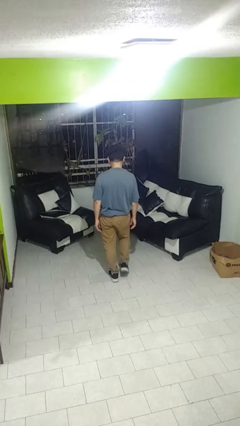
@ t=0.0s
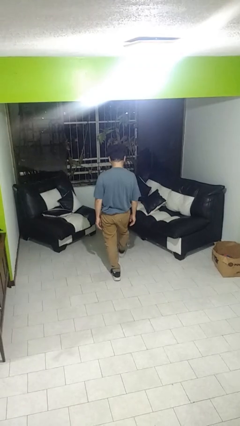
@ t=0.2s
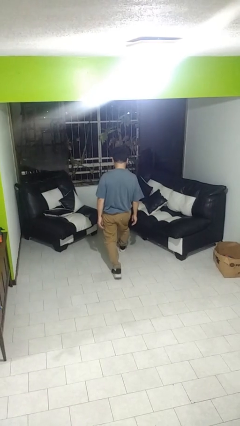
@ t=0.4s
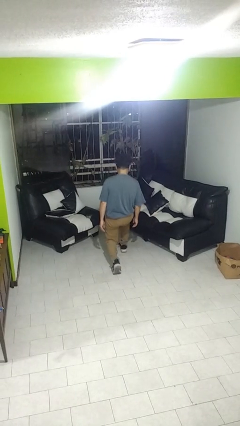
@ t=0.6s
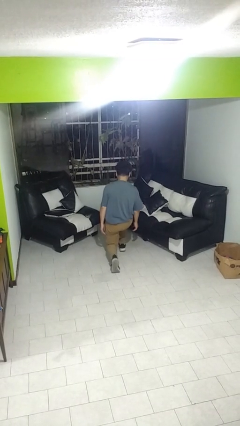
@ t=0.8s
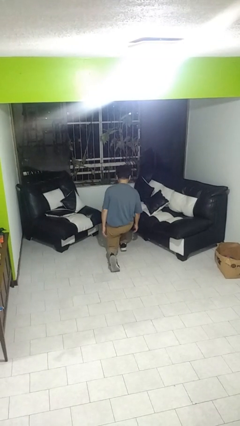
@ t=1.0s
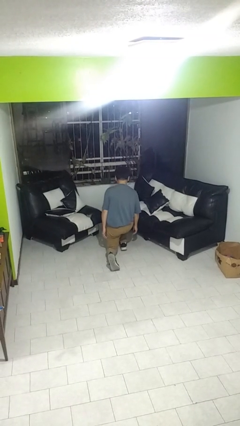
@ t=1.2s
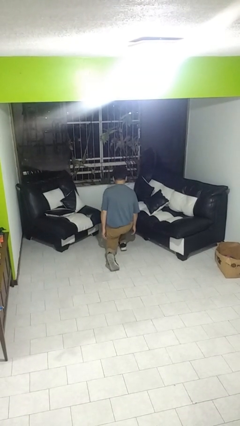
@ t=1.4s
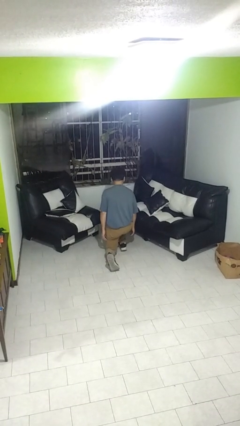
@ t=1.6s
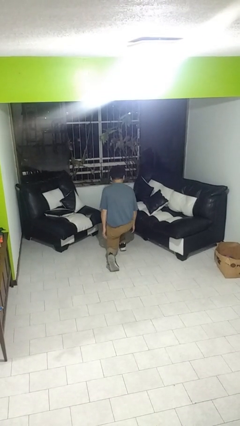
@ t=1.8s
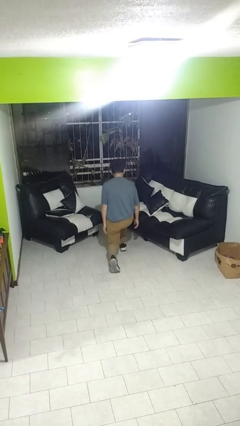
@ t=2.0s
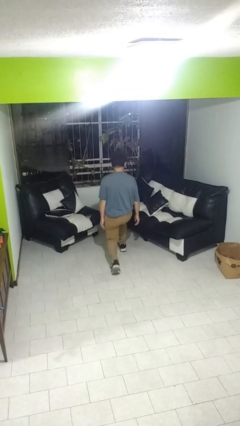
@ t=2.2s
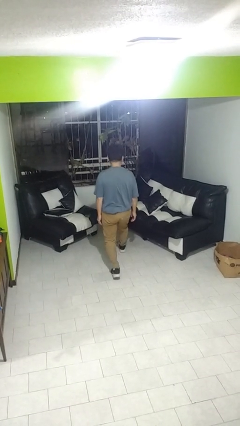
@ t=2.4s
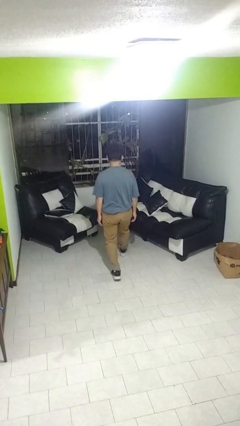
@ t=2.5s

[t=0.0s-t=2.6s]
person exercises with lunges

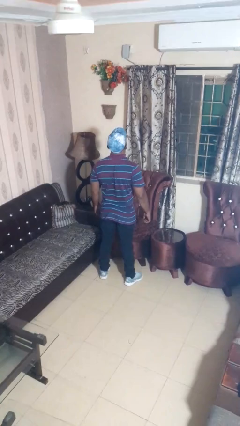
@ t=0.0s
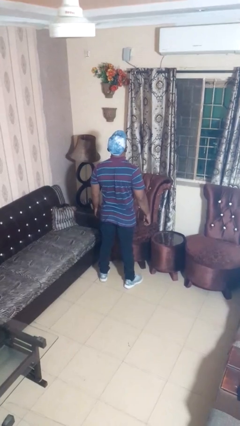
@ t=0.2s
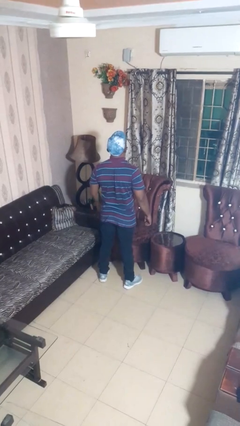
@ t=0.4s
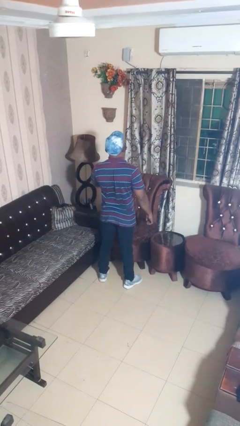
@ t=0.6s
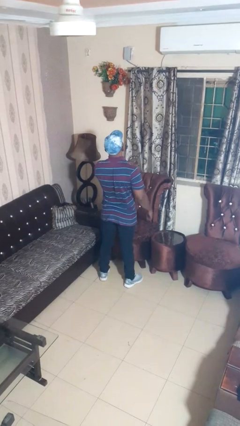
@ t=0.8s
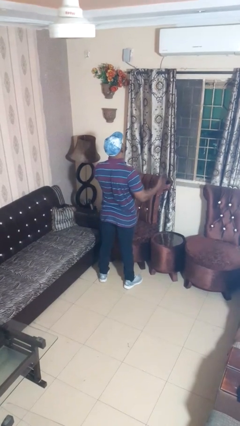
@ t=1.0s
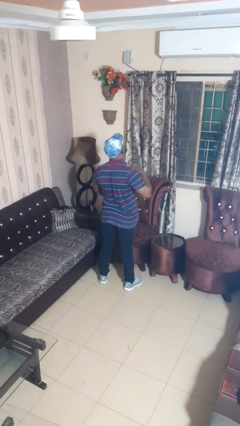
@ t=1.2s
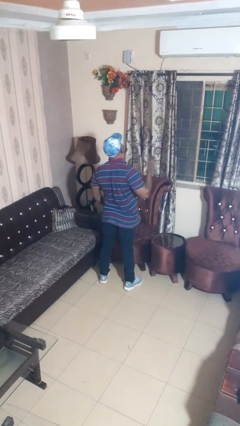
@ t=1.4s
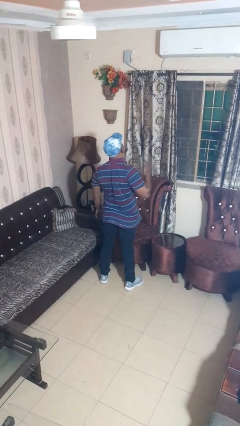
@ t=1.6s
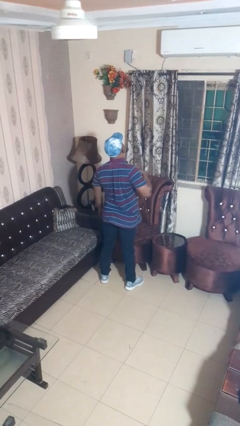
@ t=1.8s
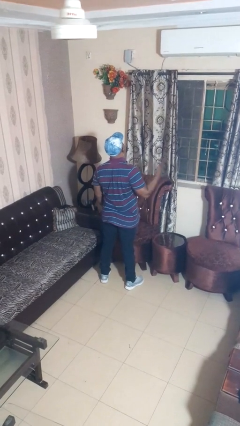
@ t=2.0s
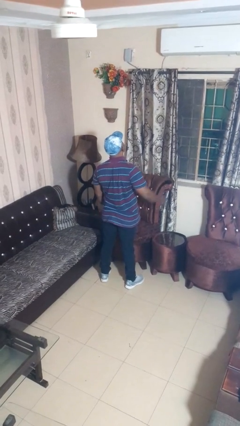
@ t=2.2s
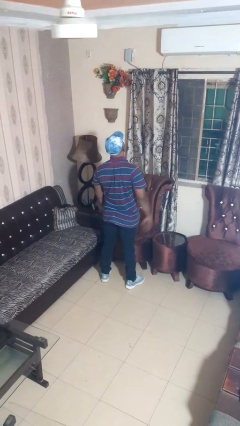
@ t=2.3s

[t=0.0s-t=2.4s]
person drums on chest

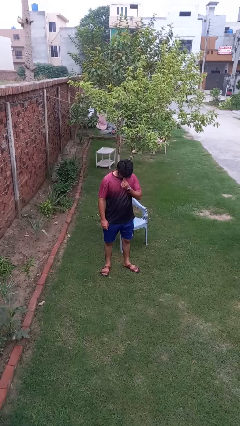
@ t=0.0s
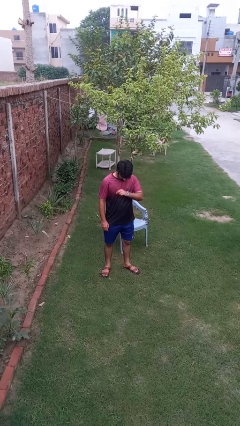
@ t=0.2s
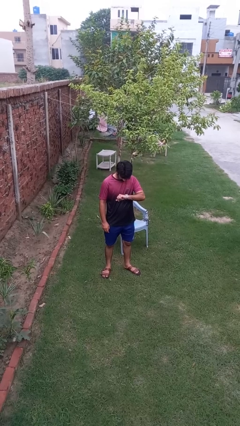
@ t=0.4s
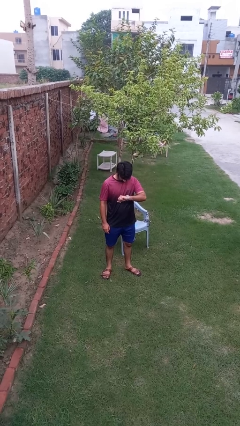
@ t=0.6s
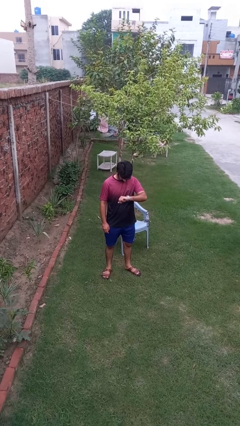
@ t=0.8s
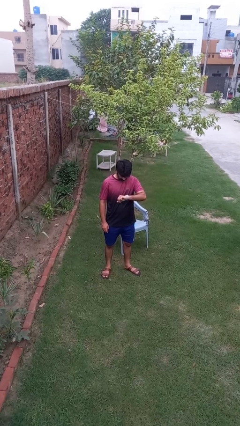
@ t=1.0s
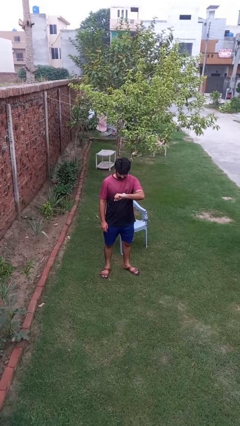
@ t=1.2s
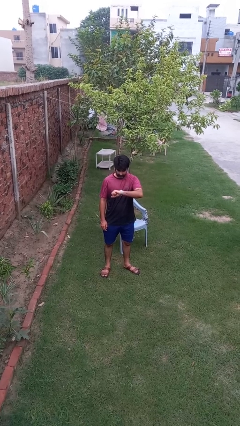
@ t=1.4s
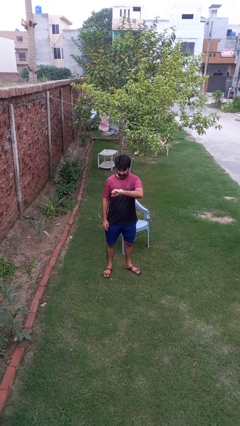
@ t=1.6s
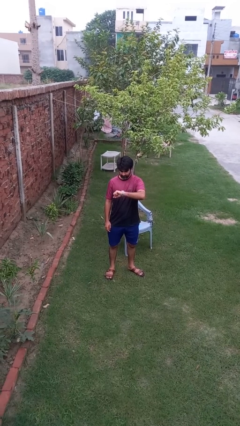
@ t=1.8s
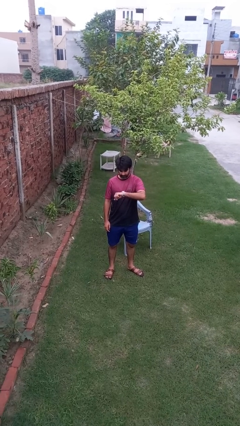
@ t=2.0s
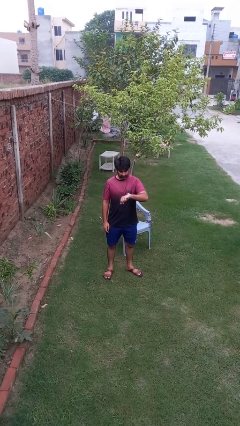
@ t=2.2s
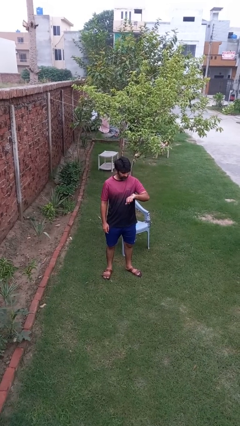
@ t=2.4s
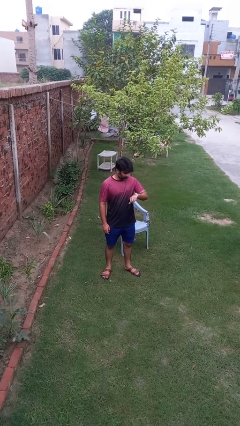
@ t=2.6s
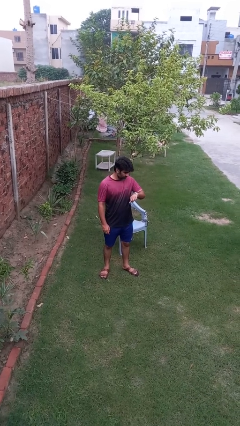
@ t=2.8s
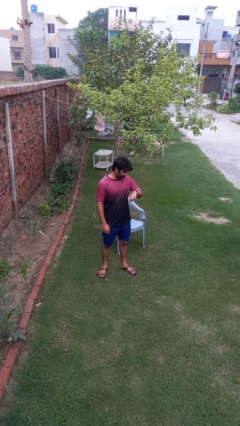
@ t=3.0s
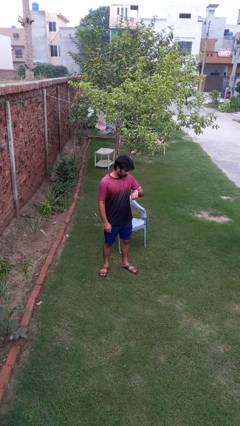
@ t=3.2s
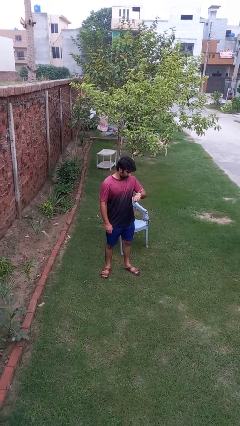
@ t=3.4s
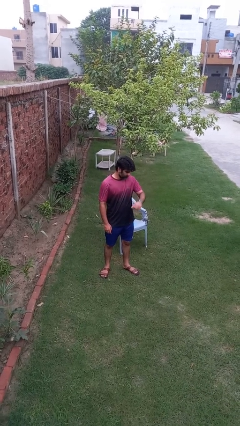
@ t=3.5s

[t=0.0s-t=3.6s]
person looks at wristwatch

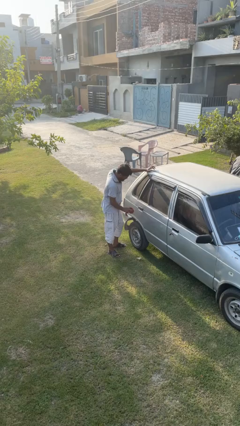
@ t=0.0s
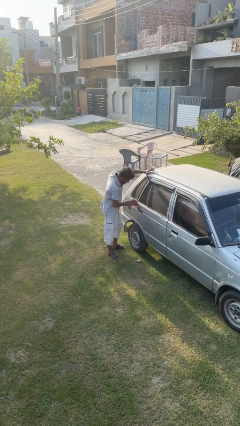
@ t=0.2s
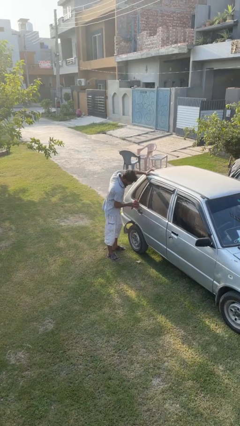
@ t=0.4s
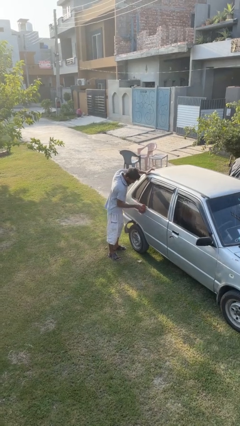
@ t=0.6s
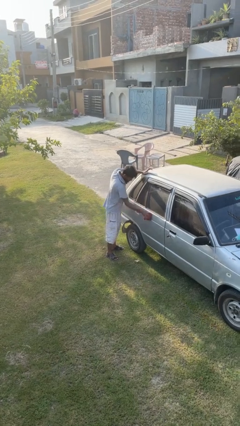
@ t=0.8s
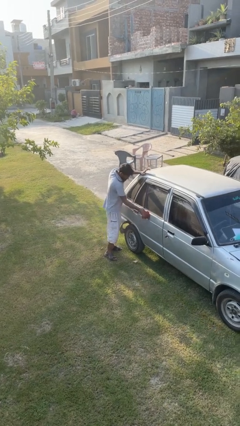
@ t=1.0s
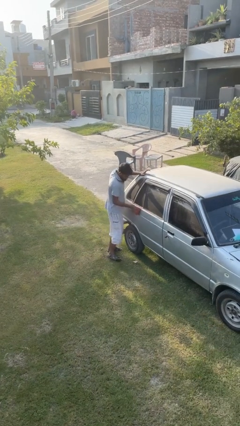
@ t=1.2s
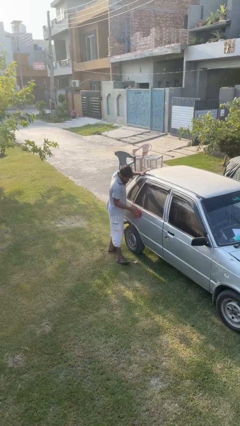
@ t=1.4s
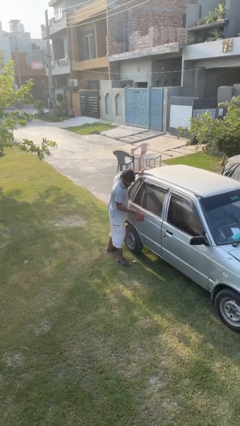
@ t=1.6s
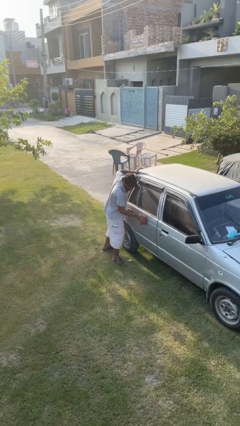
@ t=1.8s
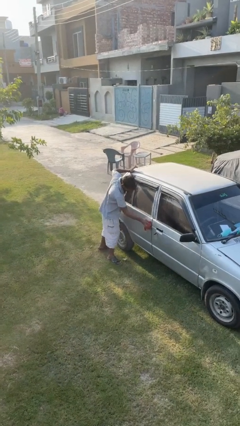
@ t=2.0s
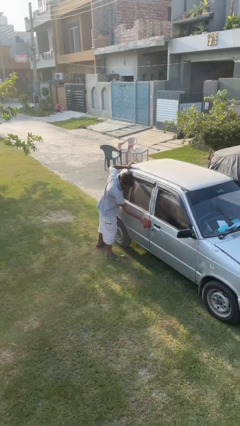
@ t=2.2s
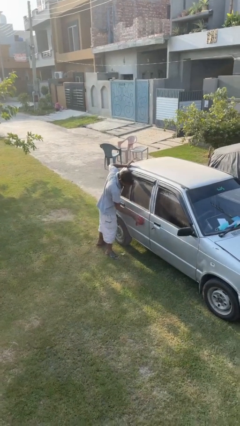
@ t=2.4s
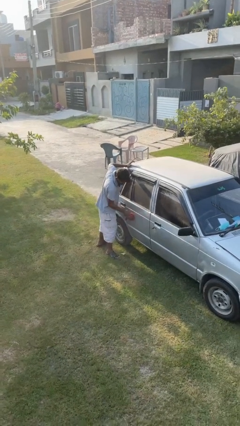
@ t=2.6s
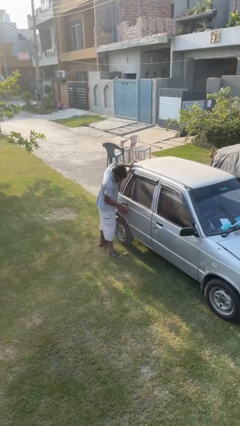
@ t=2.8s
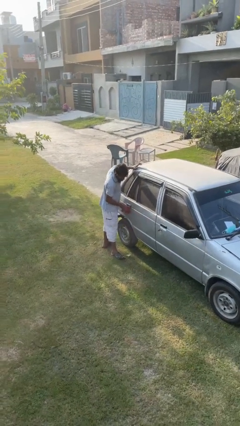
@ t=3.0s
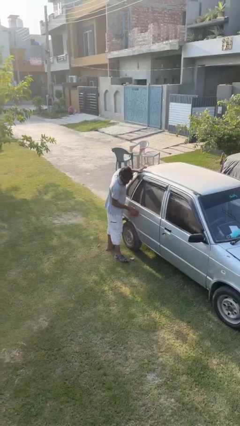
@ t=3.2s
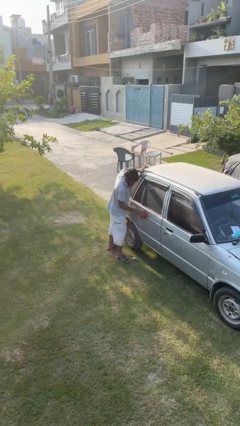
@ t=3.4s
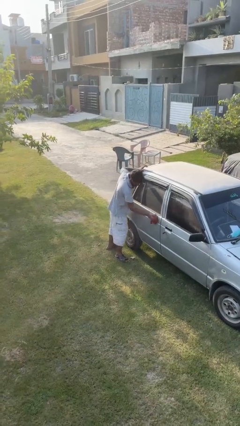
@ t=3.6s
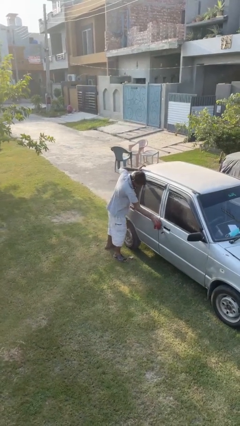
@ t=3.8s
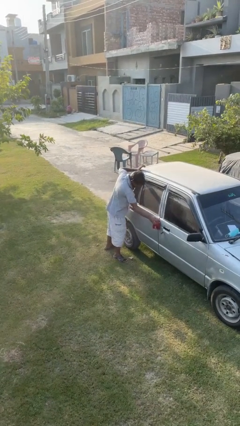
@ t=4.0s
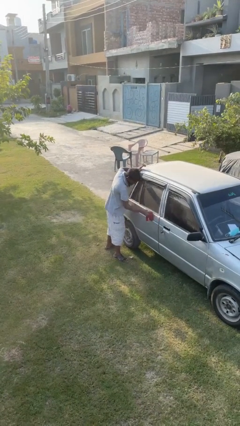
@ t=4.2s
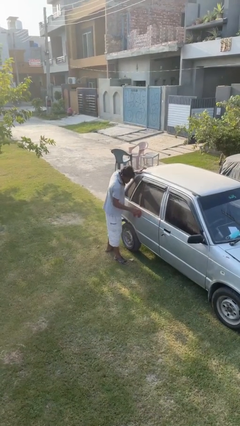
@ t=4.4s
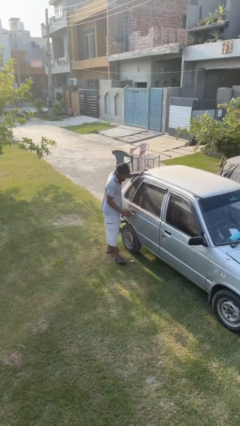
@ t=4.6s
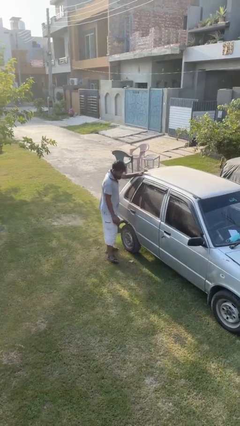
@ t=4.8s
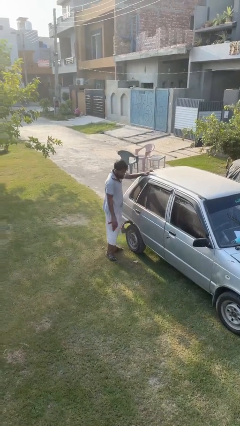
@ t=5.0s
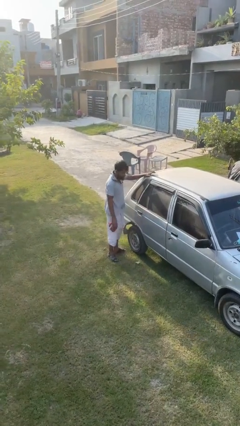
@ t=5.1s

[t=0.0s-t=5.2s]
person polishes car with rag

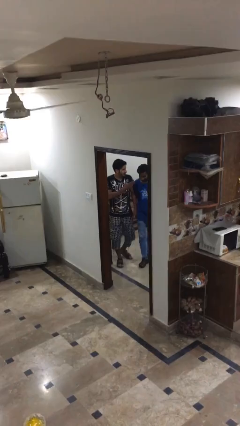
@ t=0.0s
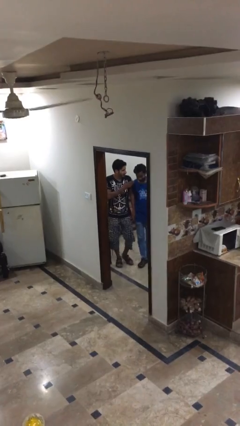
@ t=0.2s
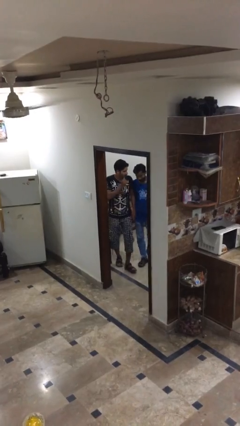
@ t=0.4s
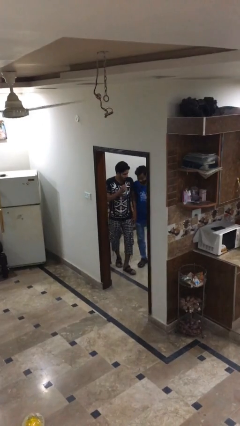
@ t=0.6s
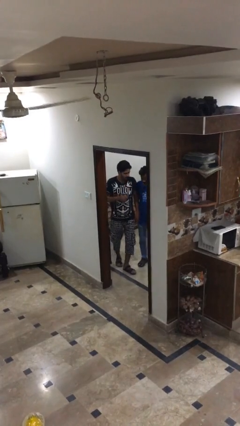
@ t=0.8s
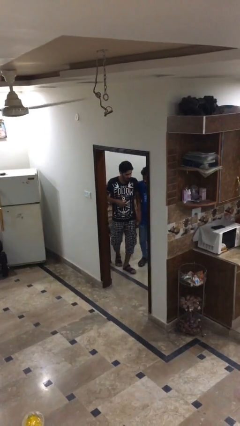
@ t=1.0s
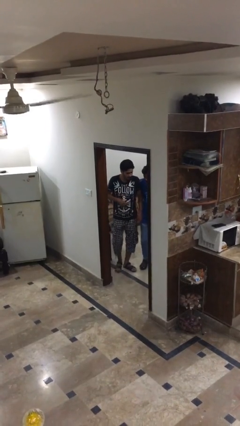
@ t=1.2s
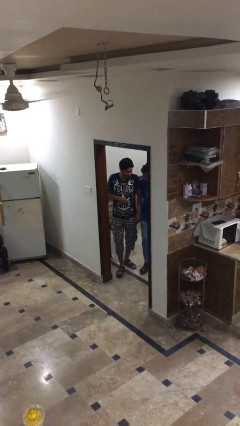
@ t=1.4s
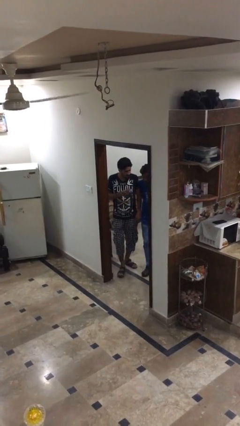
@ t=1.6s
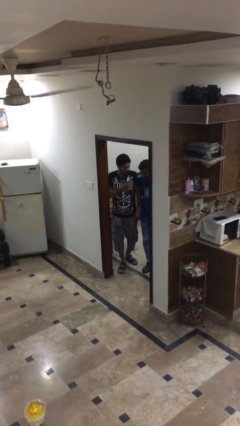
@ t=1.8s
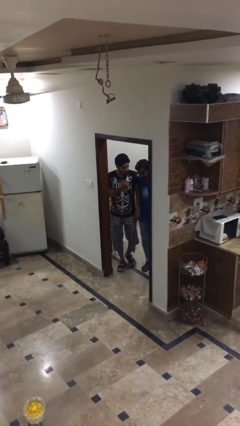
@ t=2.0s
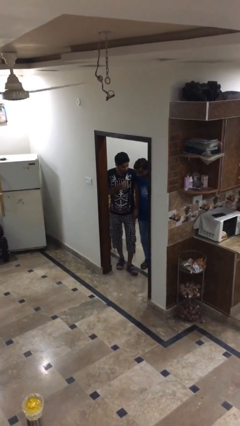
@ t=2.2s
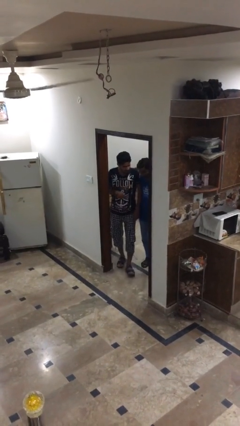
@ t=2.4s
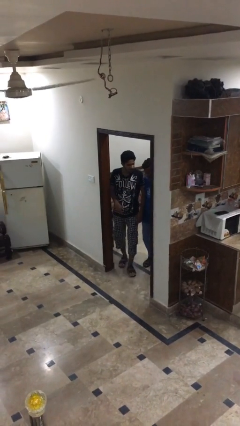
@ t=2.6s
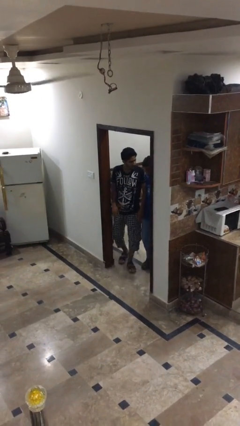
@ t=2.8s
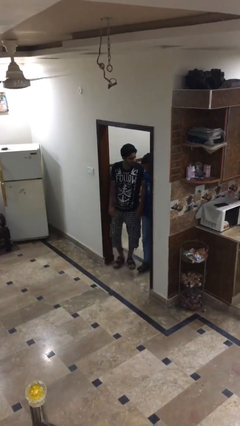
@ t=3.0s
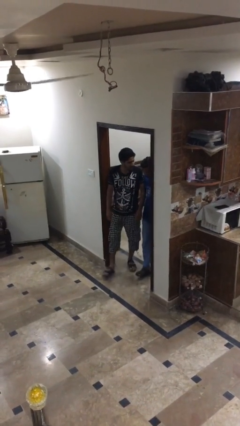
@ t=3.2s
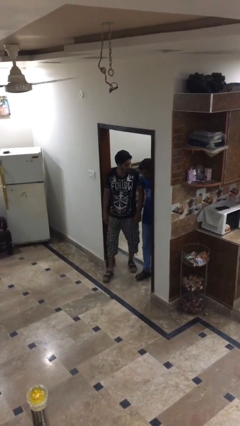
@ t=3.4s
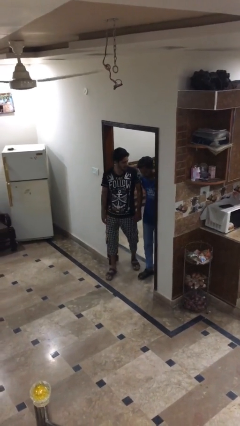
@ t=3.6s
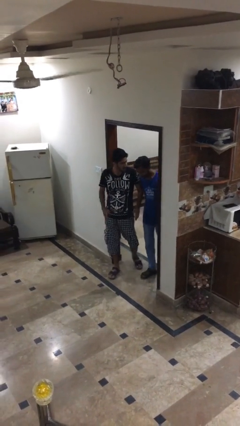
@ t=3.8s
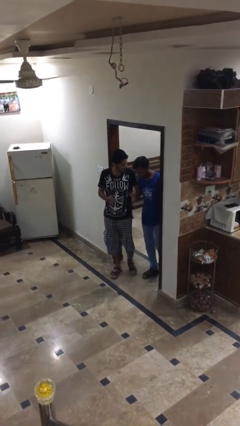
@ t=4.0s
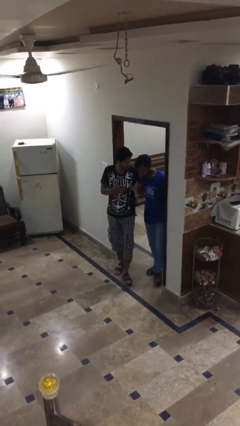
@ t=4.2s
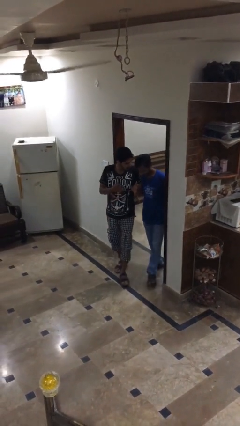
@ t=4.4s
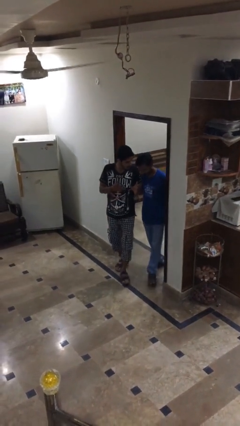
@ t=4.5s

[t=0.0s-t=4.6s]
person talks to person
